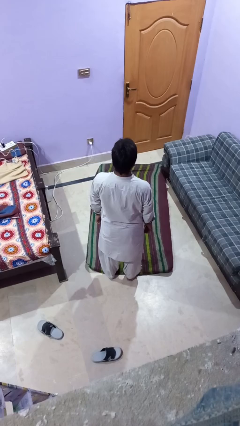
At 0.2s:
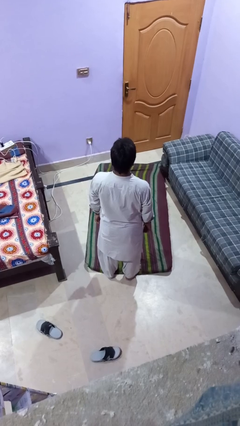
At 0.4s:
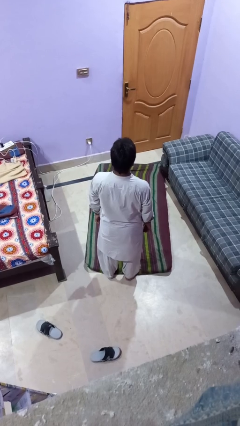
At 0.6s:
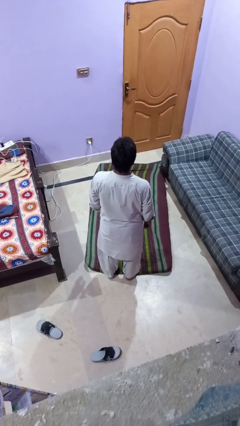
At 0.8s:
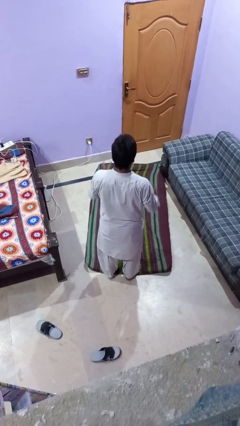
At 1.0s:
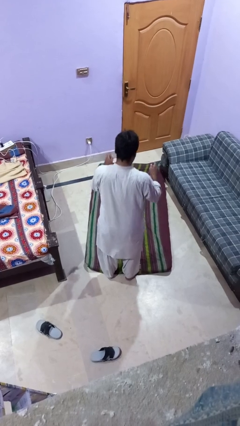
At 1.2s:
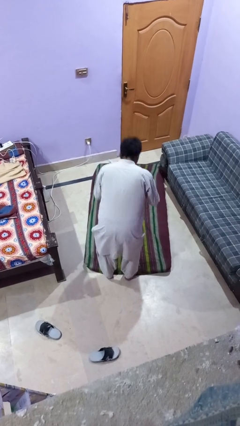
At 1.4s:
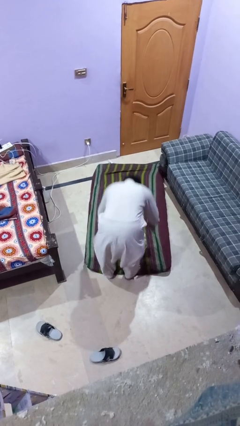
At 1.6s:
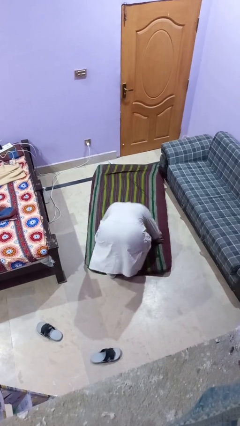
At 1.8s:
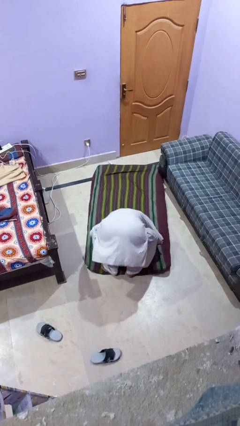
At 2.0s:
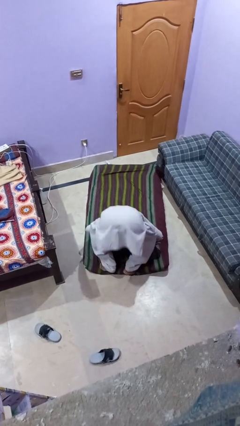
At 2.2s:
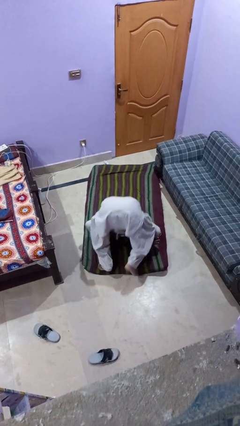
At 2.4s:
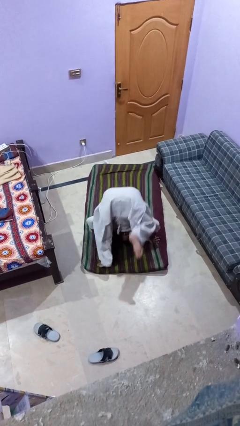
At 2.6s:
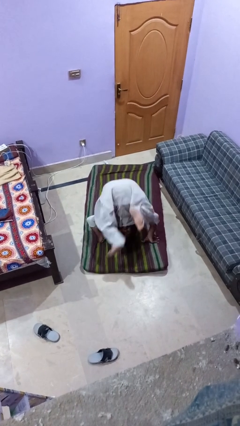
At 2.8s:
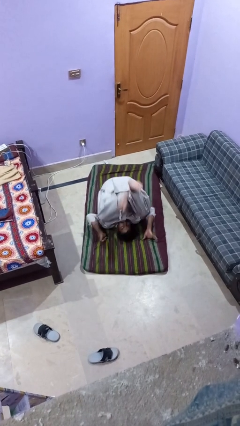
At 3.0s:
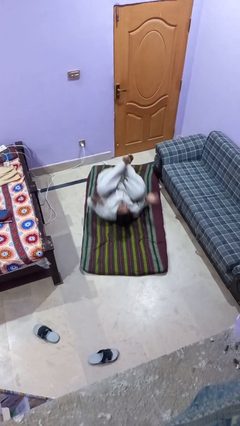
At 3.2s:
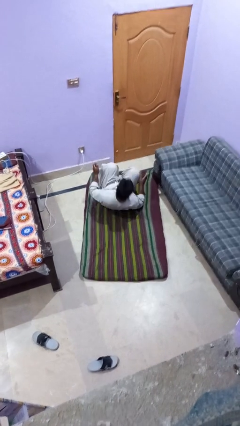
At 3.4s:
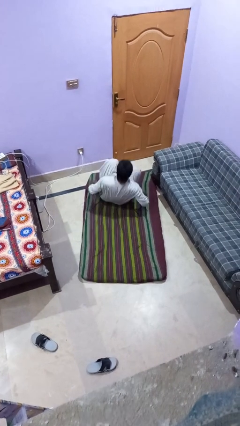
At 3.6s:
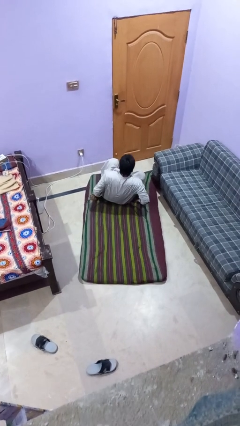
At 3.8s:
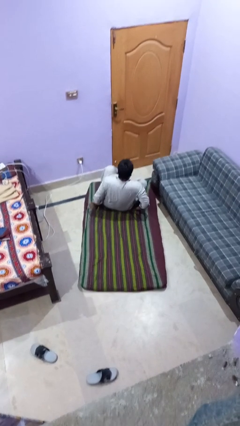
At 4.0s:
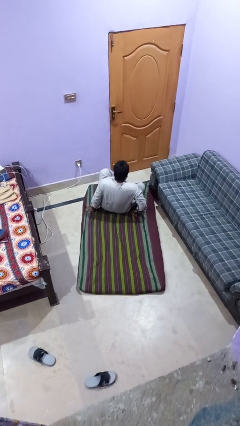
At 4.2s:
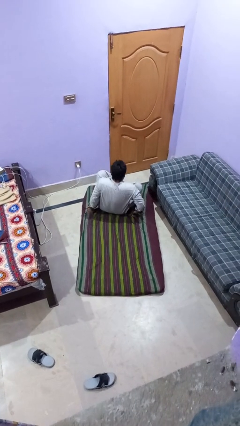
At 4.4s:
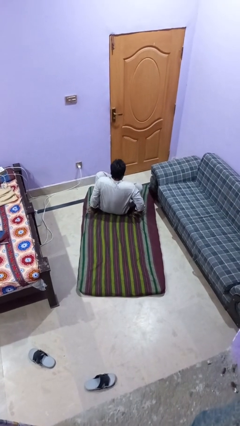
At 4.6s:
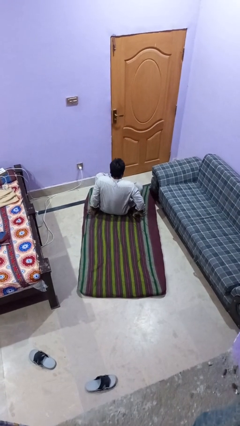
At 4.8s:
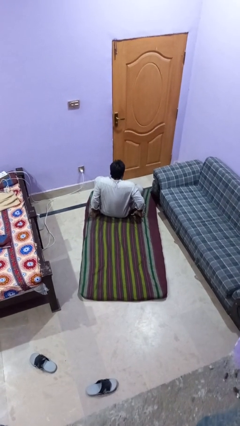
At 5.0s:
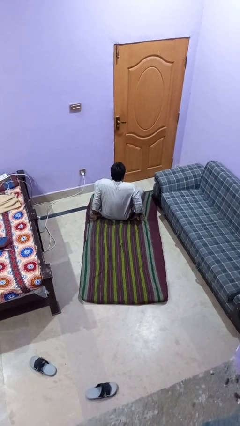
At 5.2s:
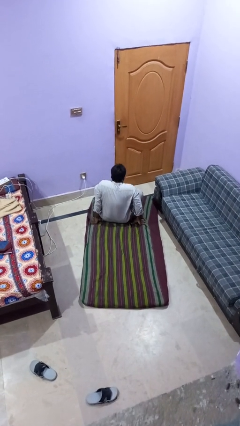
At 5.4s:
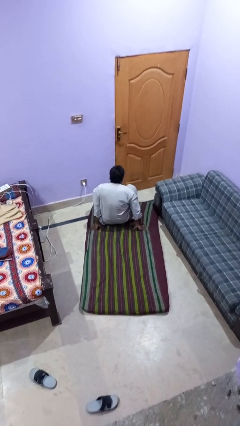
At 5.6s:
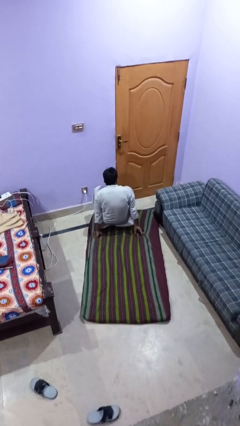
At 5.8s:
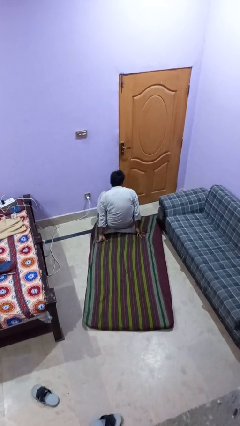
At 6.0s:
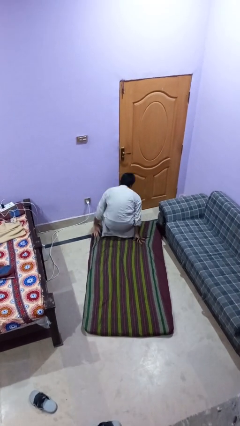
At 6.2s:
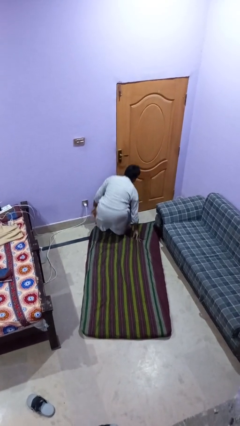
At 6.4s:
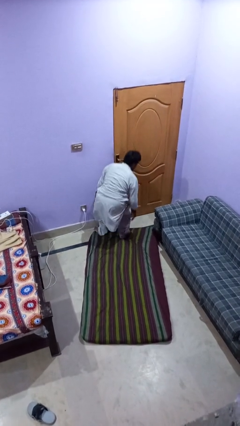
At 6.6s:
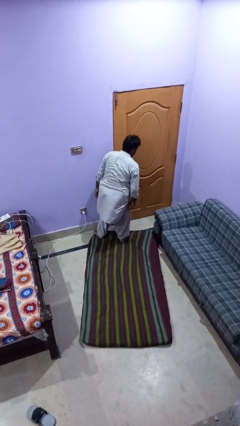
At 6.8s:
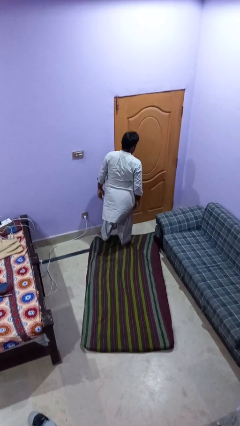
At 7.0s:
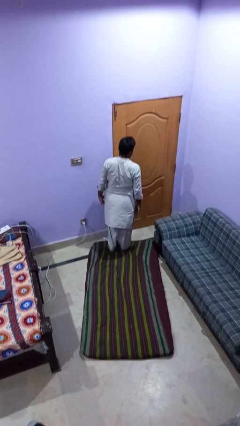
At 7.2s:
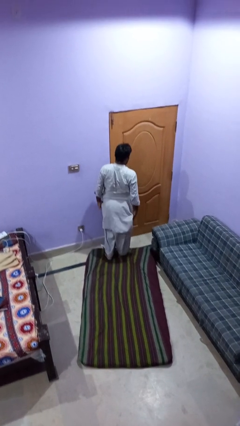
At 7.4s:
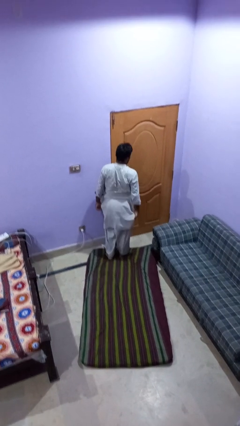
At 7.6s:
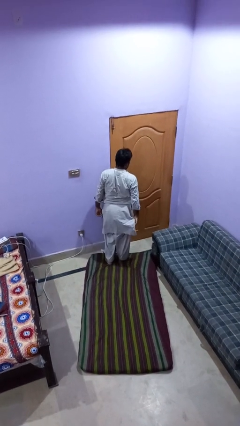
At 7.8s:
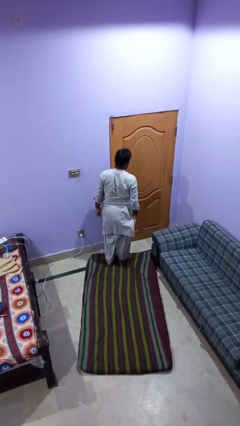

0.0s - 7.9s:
person somersaults

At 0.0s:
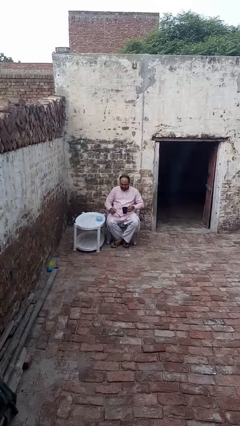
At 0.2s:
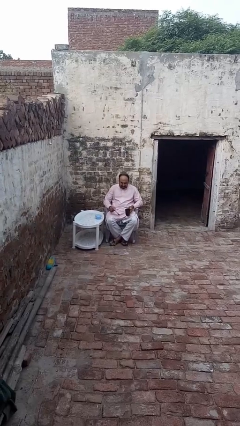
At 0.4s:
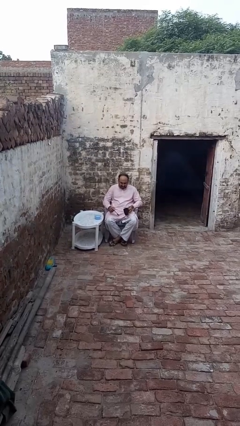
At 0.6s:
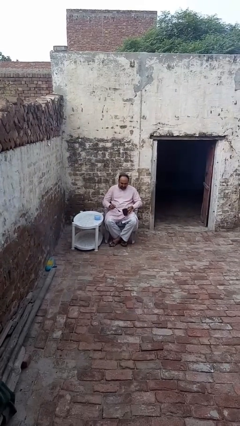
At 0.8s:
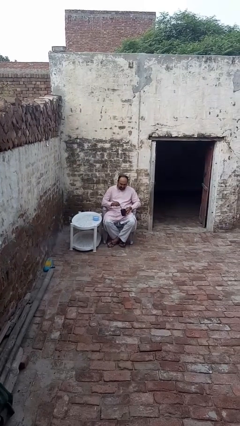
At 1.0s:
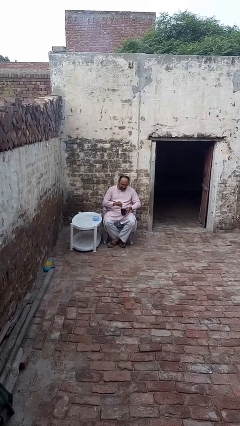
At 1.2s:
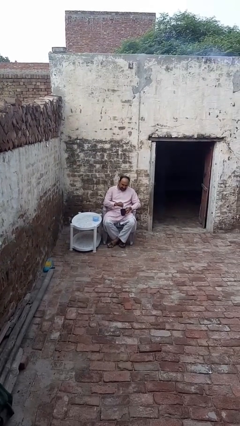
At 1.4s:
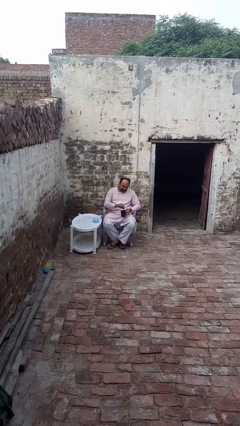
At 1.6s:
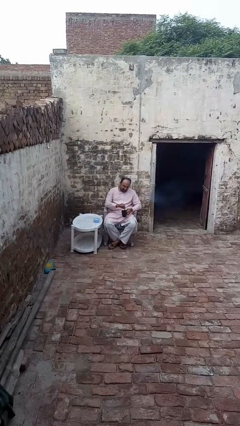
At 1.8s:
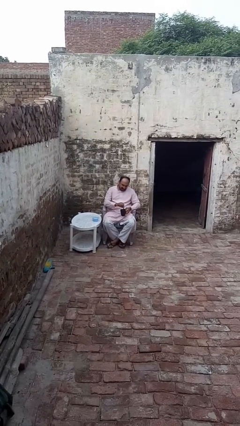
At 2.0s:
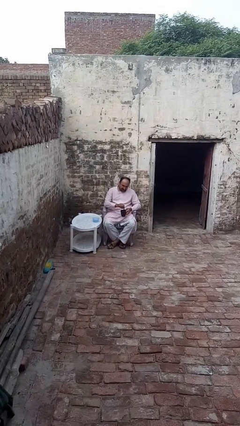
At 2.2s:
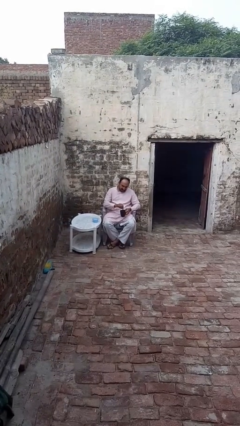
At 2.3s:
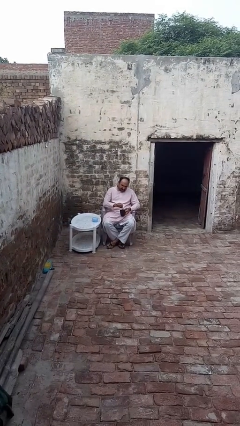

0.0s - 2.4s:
person stirs mug

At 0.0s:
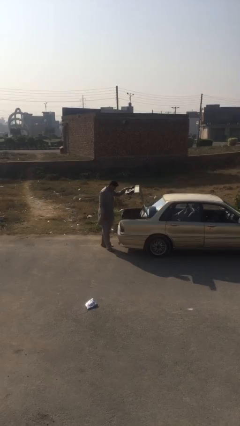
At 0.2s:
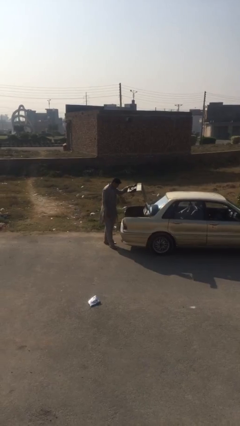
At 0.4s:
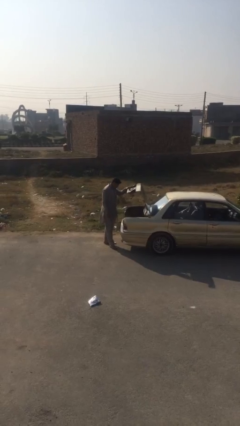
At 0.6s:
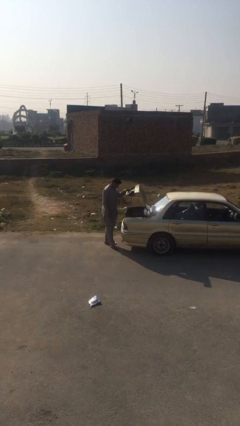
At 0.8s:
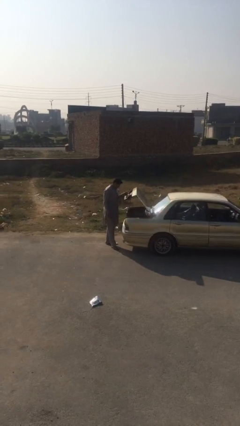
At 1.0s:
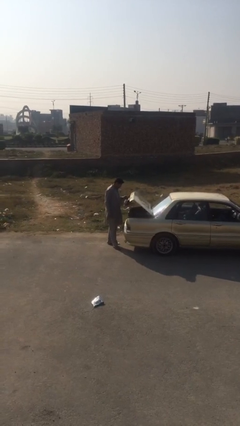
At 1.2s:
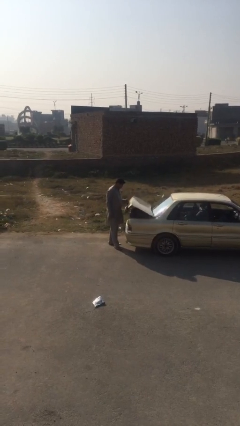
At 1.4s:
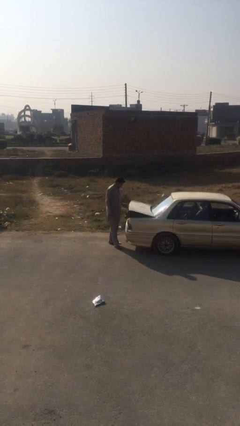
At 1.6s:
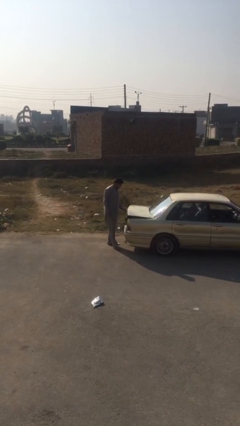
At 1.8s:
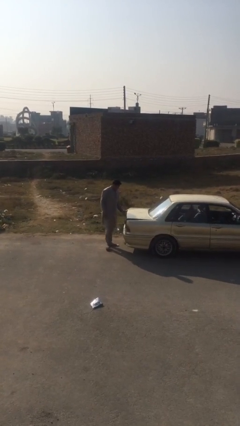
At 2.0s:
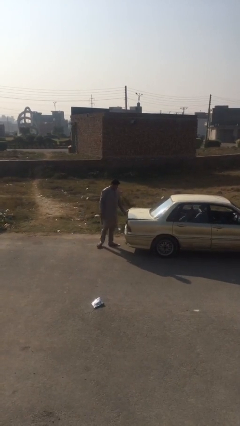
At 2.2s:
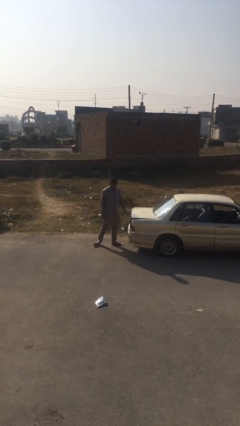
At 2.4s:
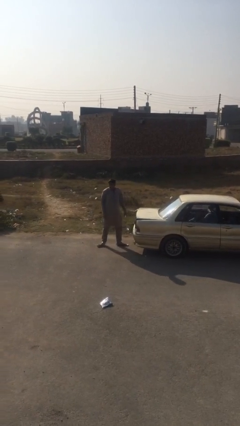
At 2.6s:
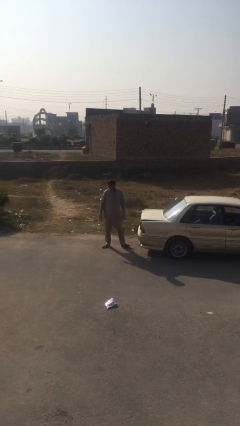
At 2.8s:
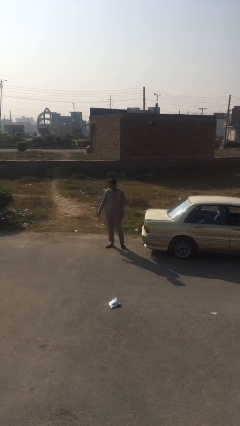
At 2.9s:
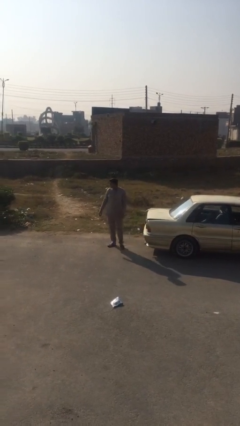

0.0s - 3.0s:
person closes car trunk

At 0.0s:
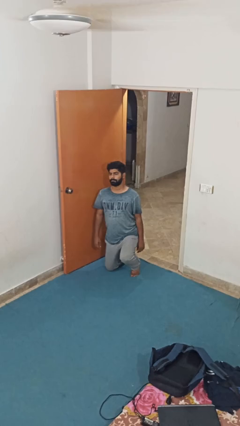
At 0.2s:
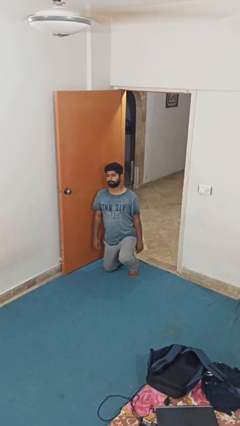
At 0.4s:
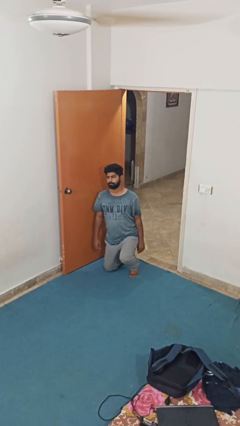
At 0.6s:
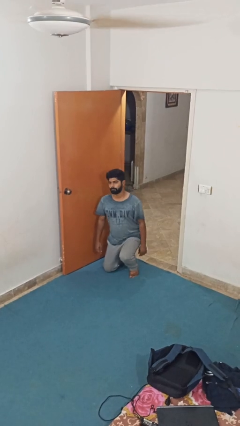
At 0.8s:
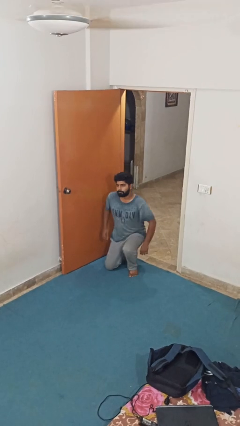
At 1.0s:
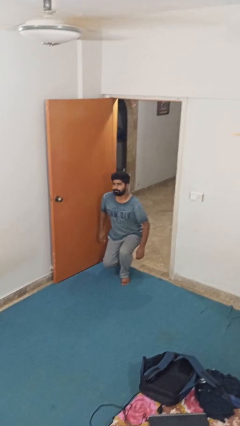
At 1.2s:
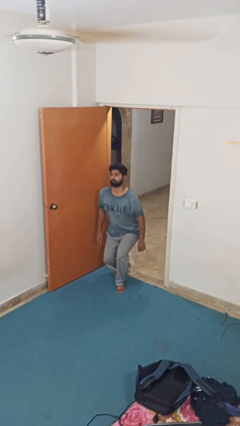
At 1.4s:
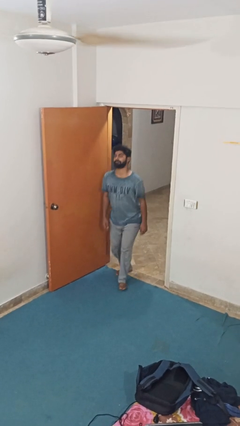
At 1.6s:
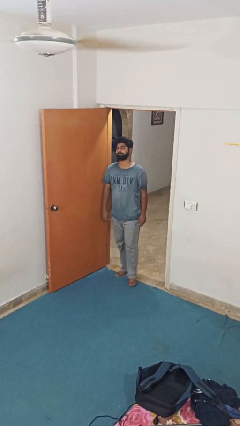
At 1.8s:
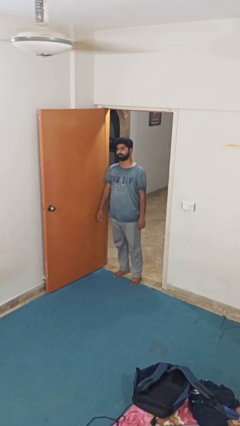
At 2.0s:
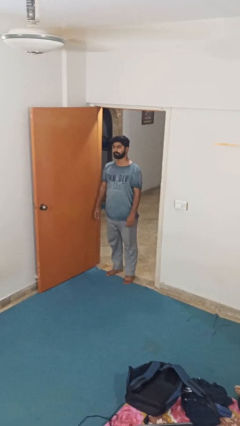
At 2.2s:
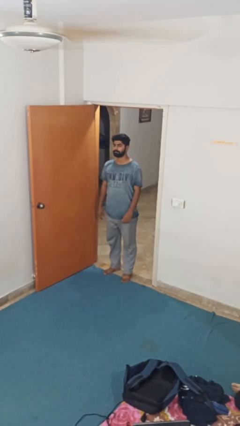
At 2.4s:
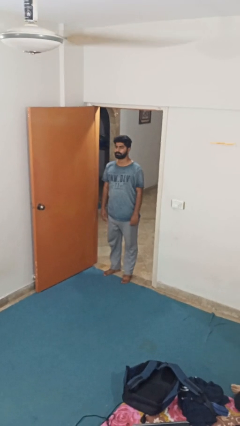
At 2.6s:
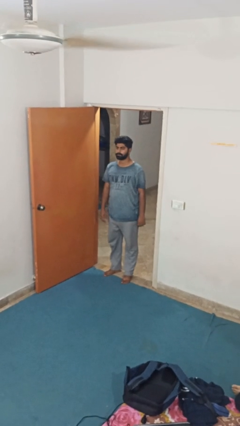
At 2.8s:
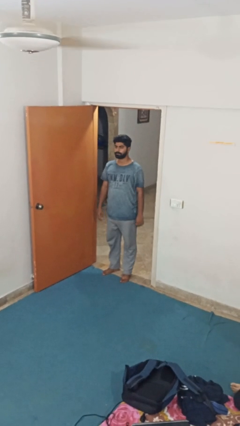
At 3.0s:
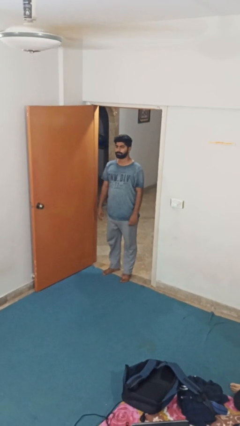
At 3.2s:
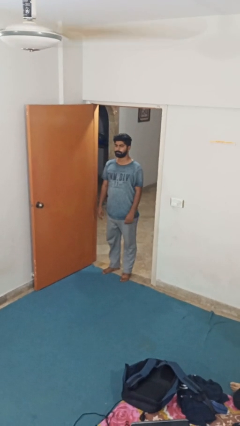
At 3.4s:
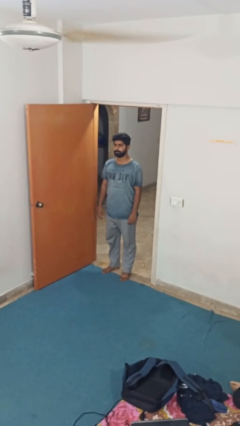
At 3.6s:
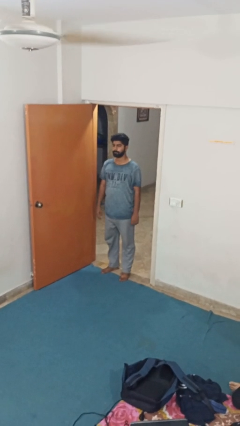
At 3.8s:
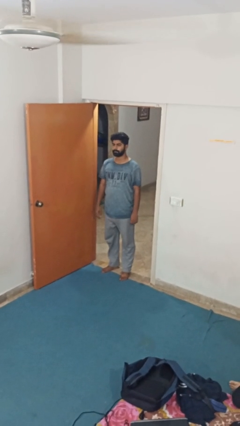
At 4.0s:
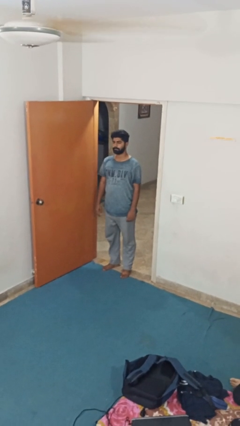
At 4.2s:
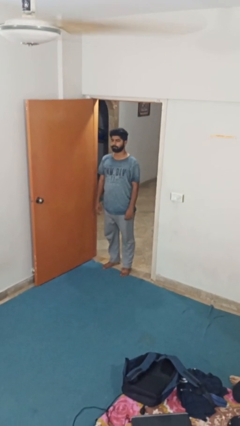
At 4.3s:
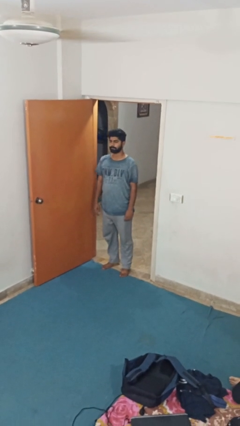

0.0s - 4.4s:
person stands up from floor

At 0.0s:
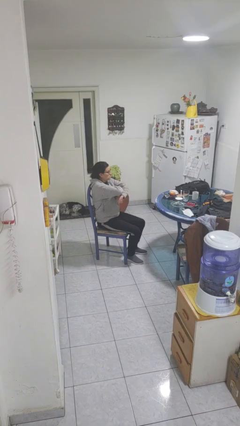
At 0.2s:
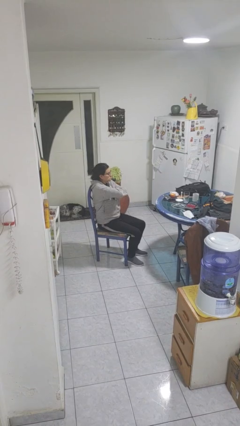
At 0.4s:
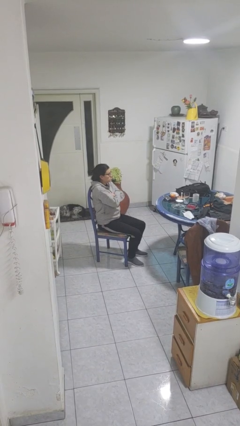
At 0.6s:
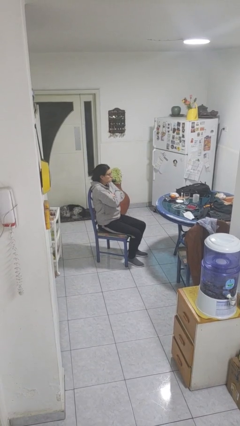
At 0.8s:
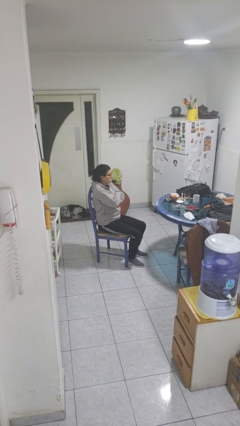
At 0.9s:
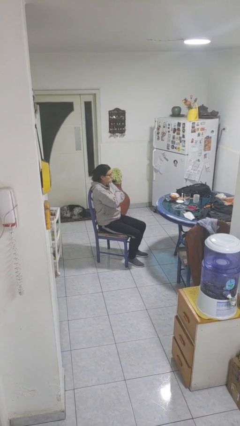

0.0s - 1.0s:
person crosses arms
